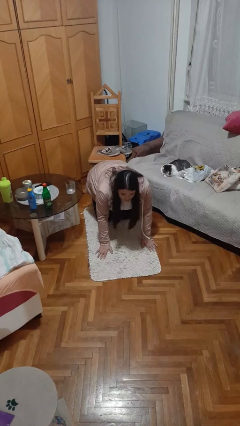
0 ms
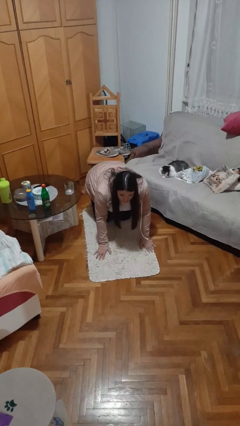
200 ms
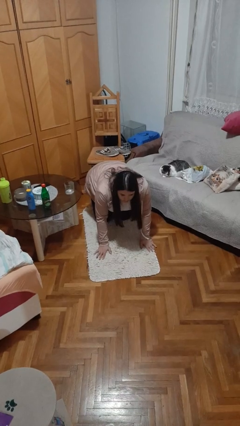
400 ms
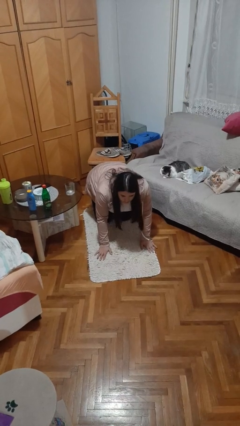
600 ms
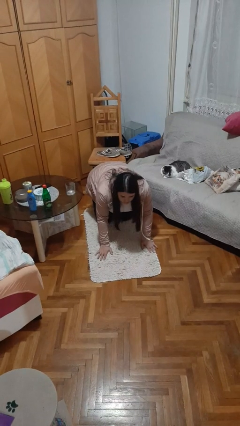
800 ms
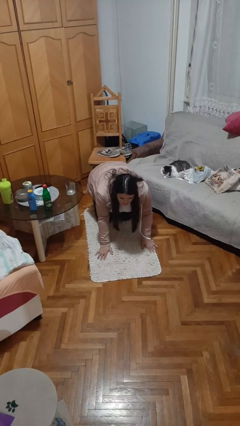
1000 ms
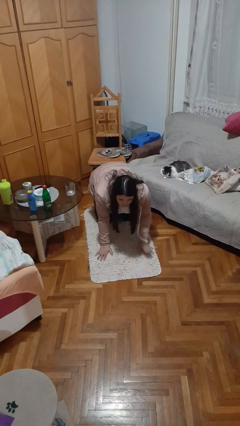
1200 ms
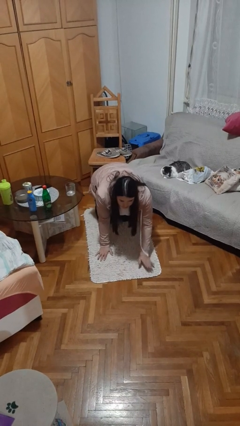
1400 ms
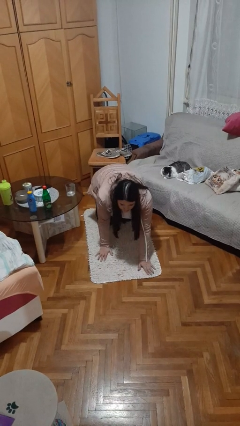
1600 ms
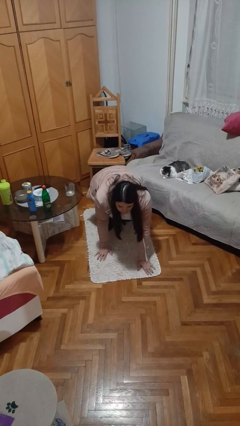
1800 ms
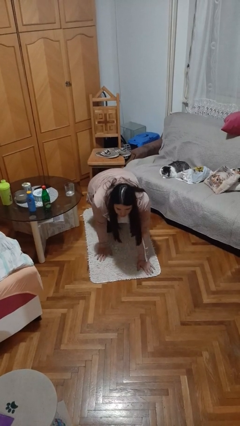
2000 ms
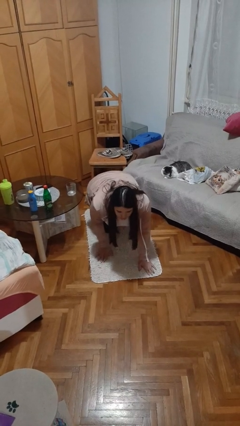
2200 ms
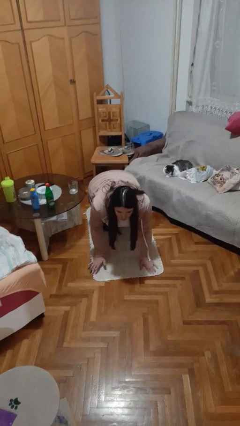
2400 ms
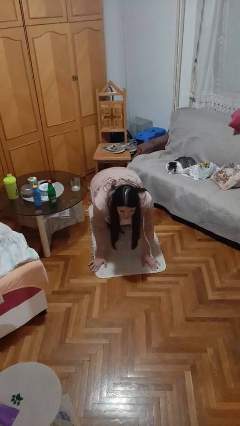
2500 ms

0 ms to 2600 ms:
person crawls

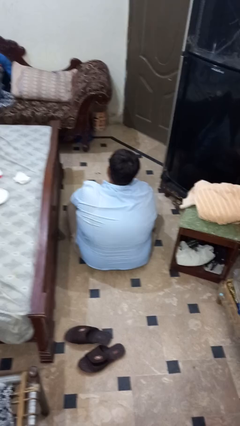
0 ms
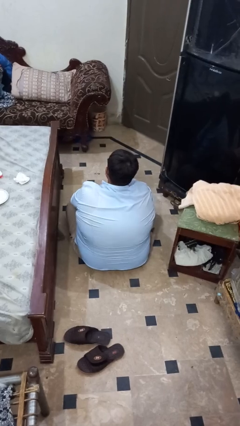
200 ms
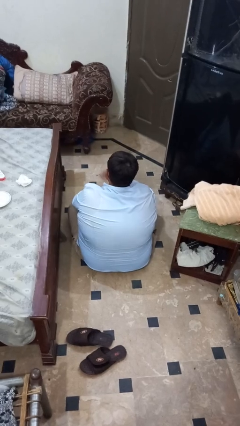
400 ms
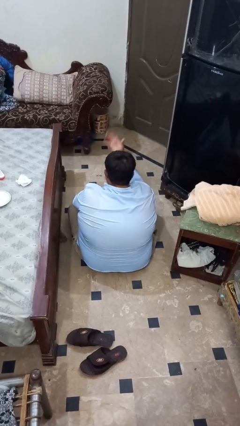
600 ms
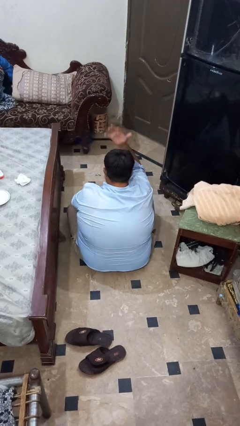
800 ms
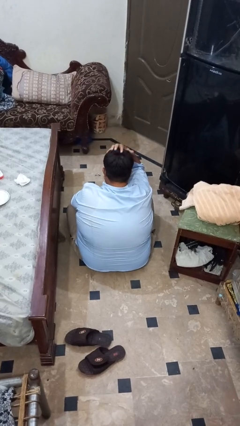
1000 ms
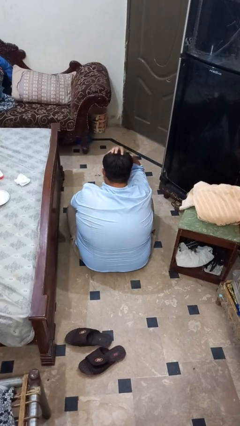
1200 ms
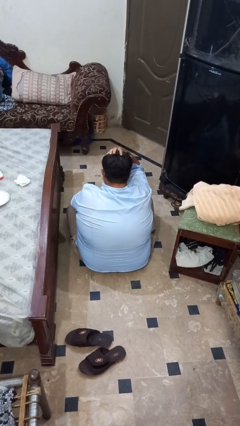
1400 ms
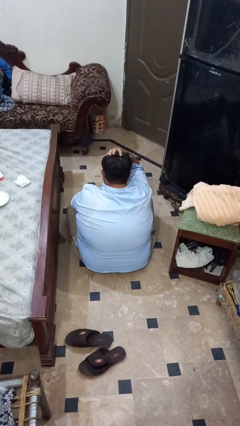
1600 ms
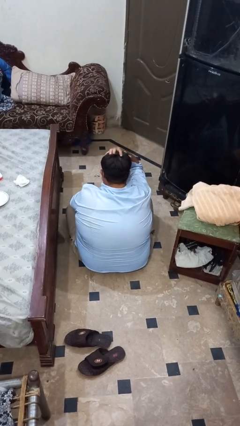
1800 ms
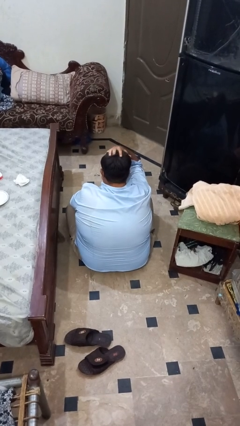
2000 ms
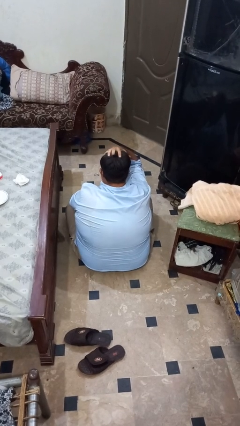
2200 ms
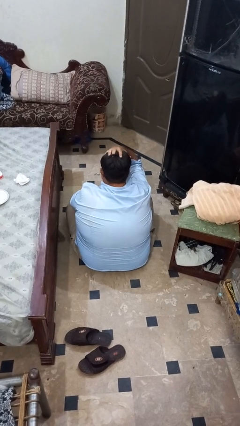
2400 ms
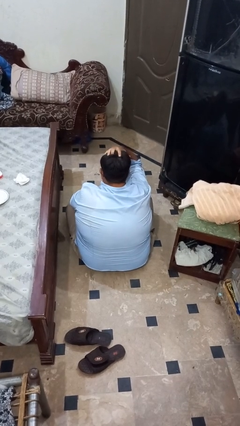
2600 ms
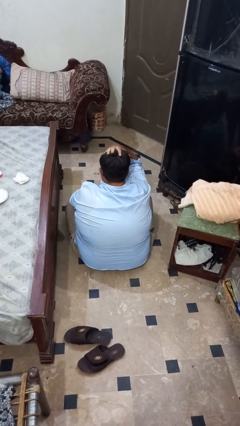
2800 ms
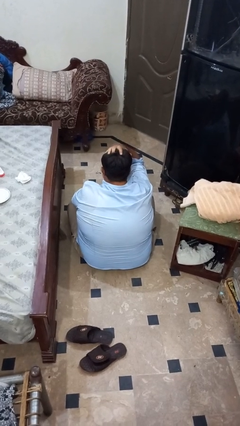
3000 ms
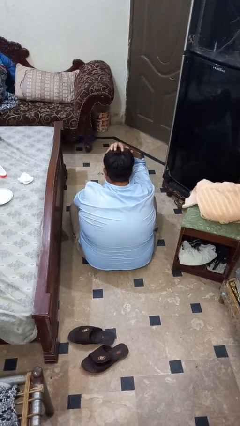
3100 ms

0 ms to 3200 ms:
person pats head

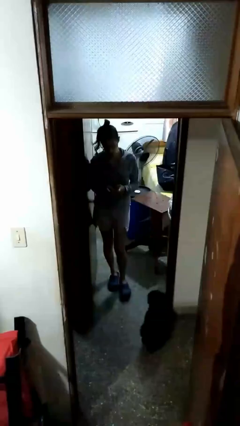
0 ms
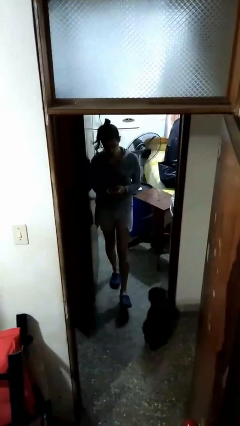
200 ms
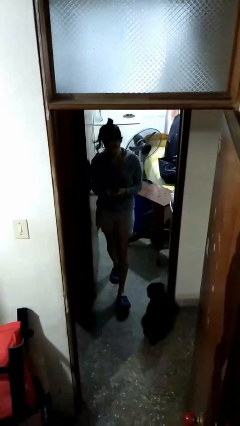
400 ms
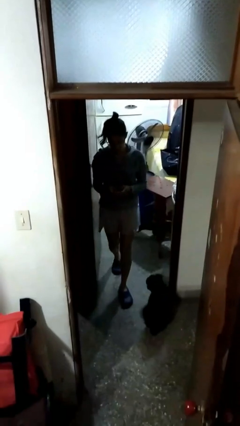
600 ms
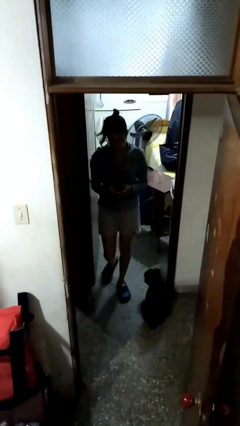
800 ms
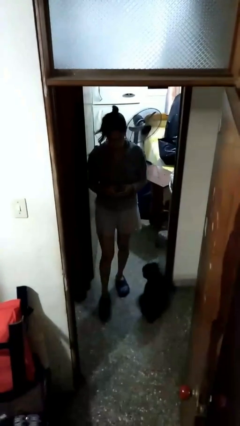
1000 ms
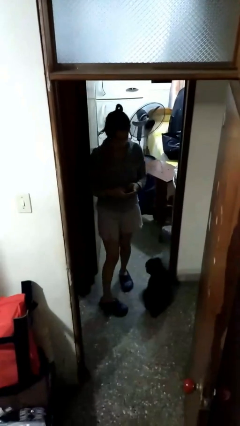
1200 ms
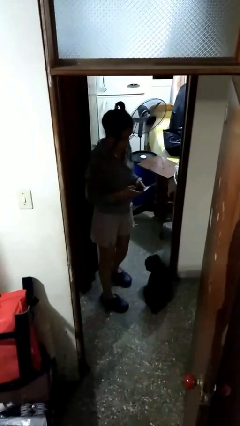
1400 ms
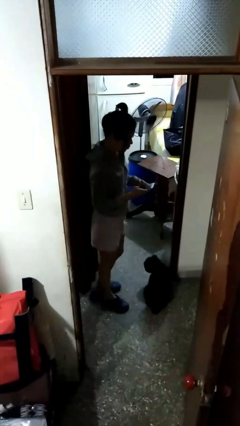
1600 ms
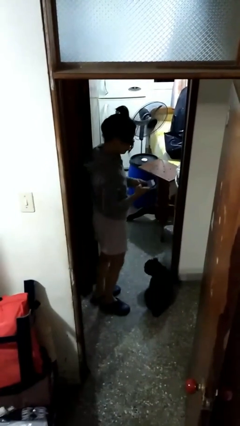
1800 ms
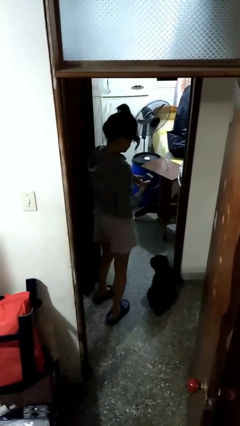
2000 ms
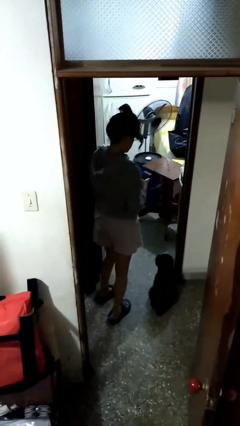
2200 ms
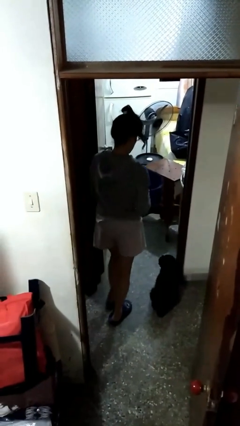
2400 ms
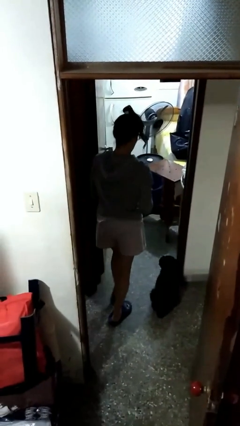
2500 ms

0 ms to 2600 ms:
person enters scene through structure

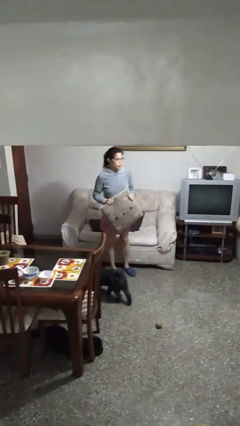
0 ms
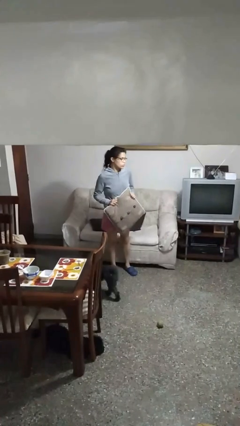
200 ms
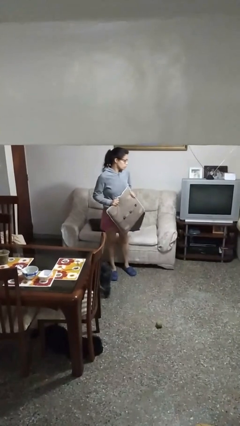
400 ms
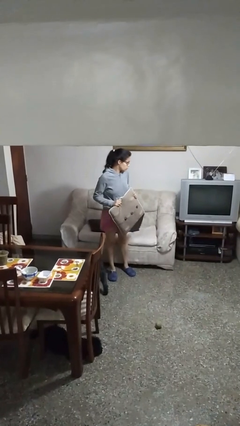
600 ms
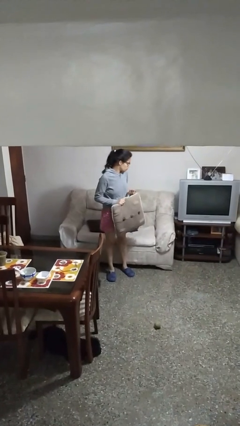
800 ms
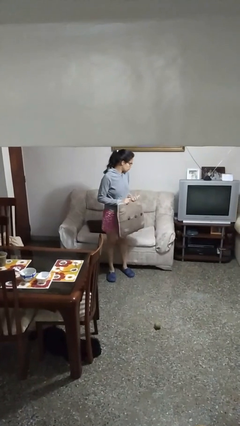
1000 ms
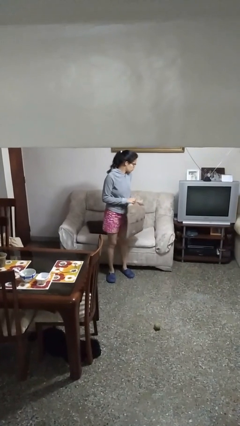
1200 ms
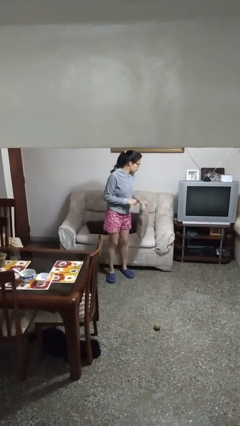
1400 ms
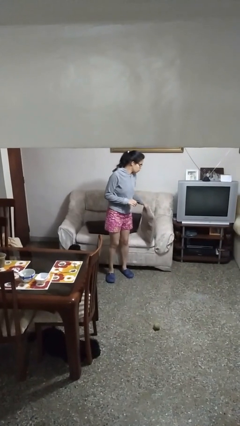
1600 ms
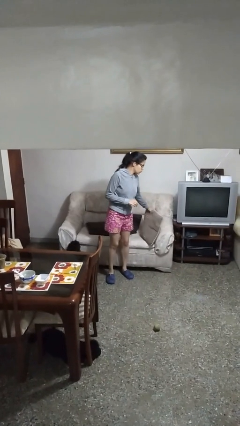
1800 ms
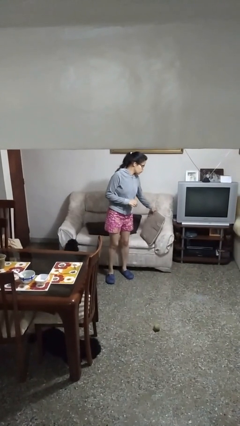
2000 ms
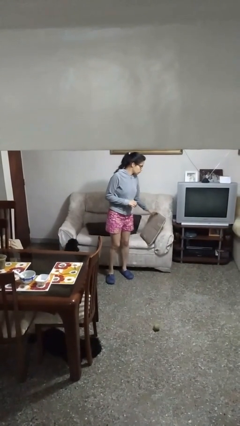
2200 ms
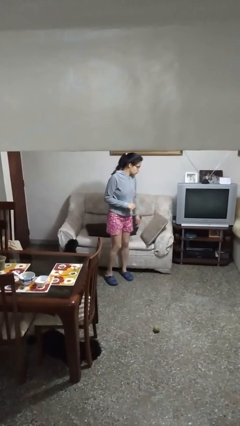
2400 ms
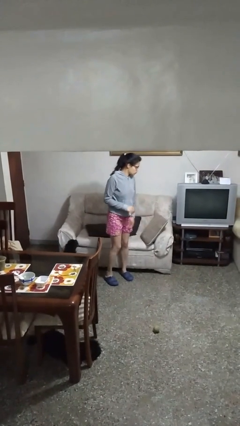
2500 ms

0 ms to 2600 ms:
person puts down object on couch

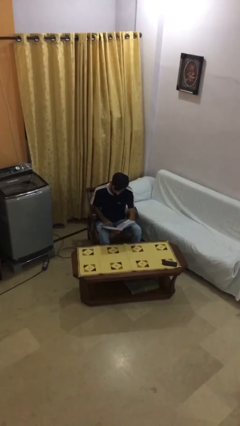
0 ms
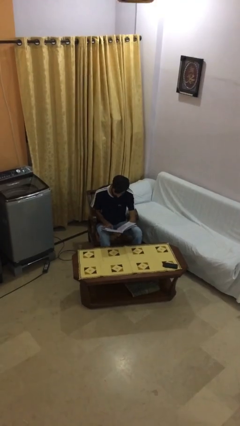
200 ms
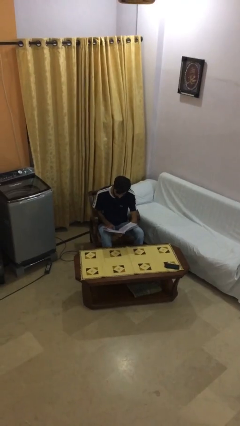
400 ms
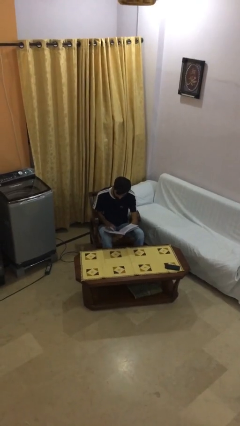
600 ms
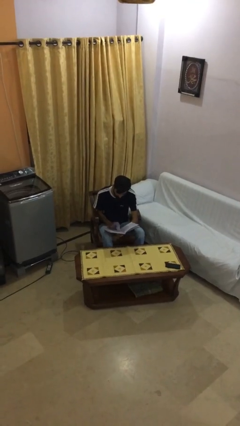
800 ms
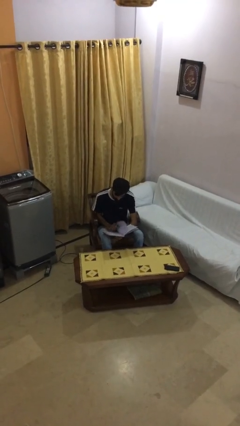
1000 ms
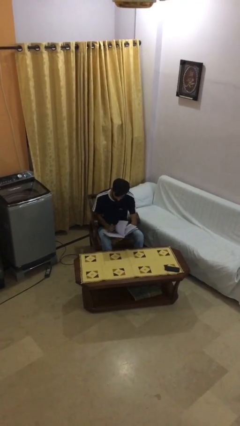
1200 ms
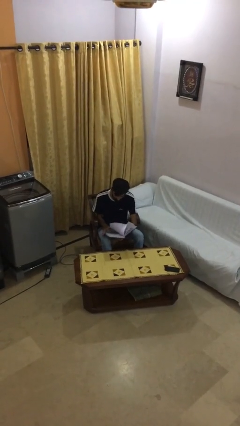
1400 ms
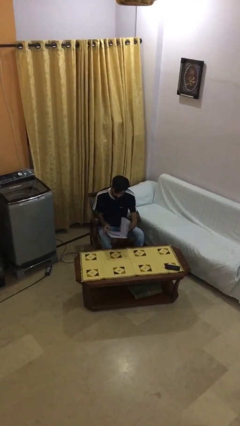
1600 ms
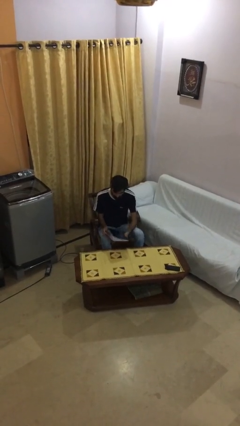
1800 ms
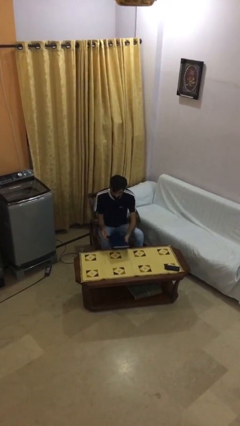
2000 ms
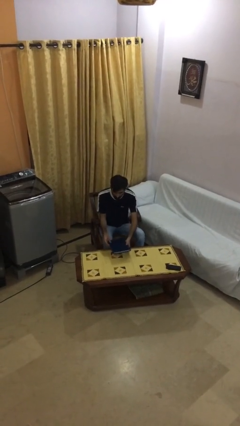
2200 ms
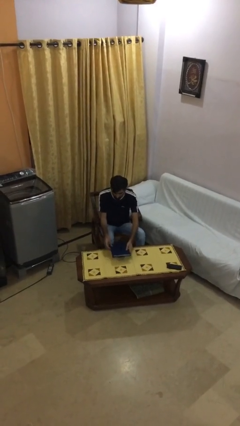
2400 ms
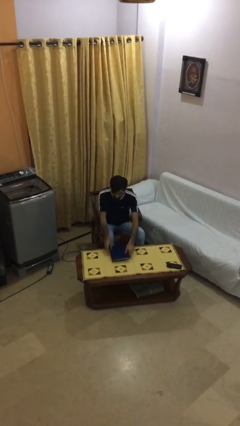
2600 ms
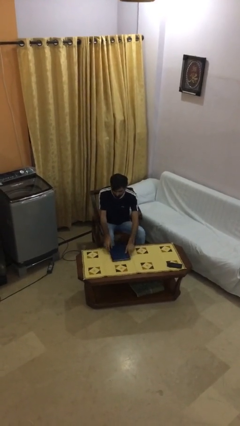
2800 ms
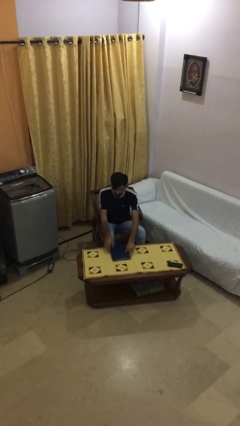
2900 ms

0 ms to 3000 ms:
person puts down object on table

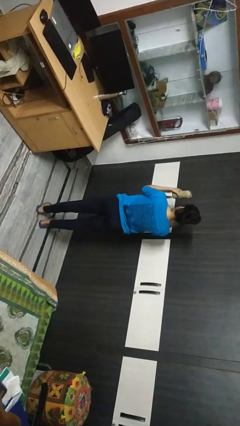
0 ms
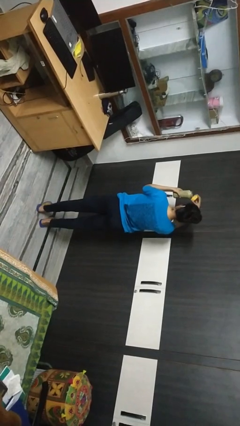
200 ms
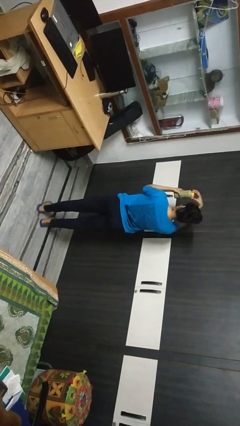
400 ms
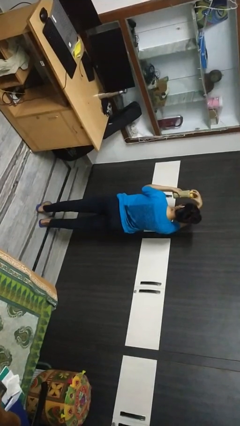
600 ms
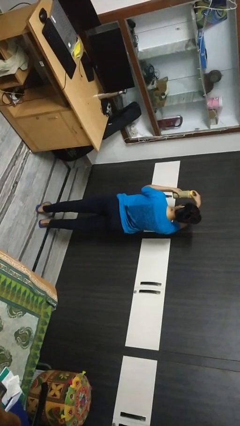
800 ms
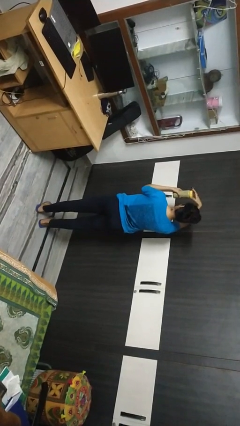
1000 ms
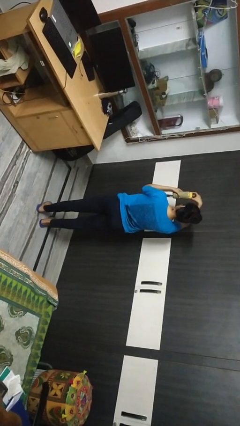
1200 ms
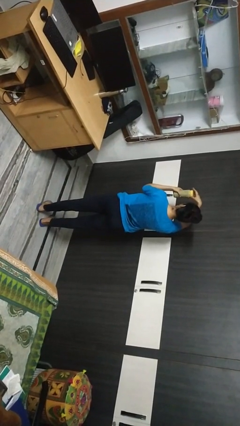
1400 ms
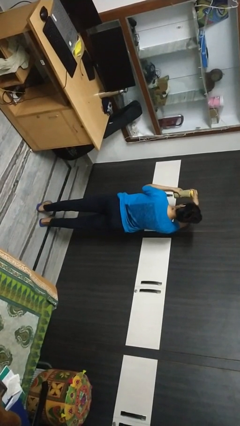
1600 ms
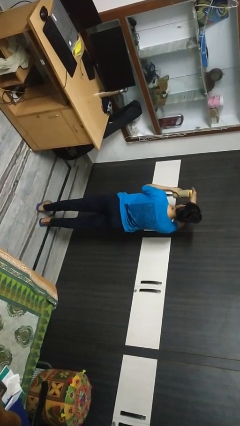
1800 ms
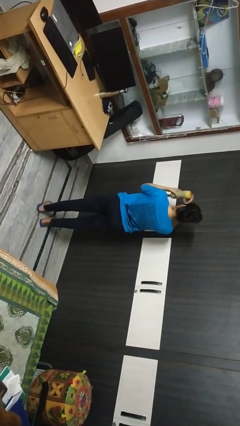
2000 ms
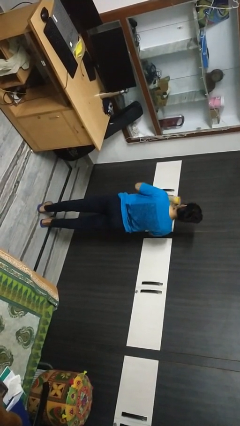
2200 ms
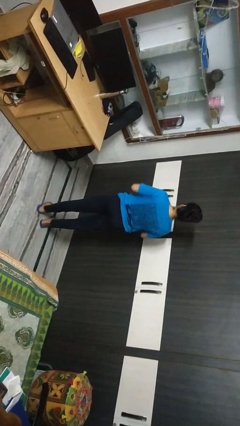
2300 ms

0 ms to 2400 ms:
person closes jar

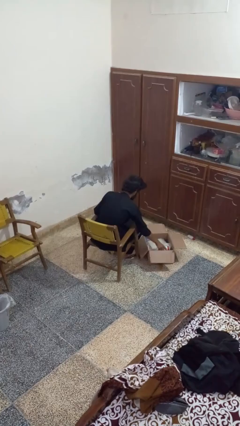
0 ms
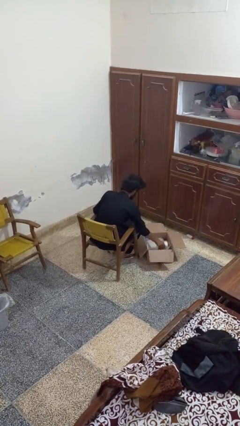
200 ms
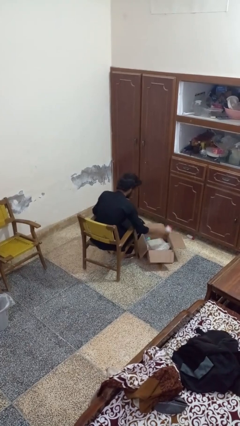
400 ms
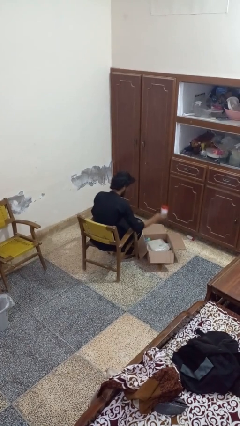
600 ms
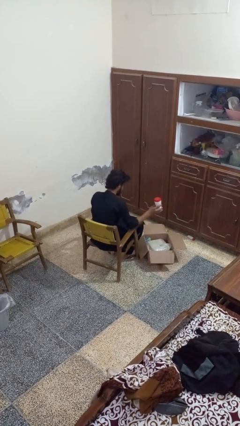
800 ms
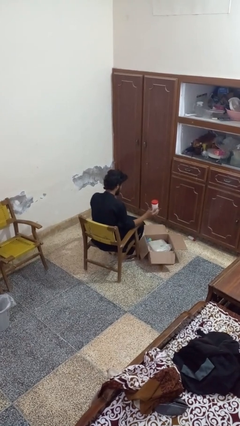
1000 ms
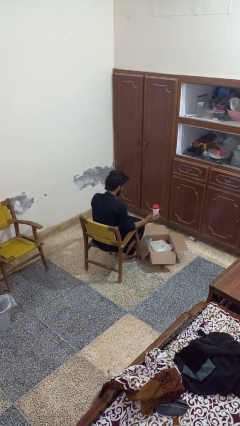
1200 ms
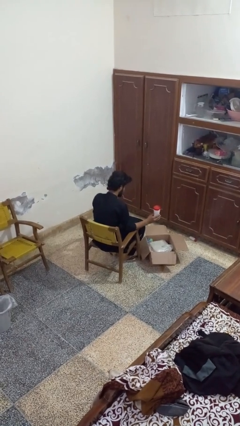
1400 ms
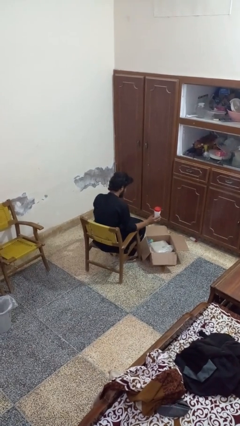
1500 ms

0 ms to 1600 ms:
person takes object from box
